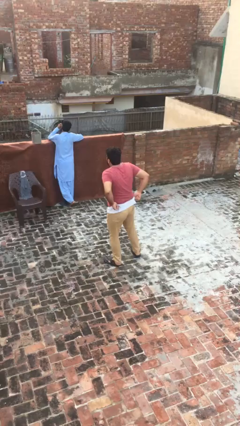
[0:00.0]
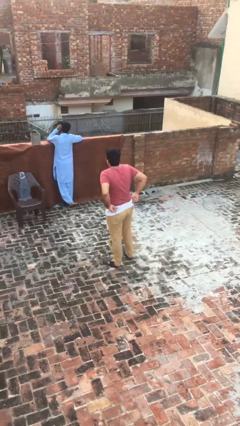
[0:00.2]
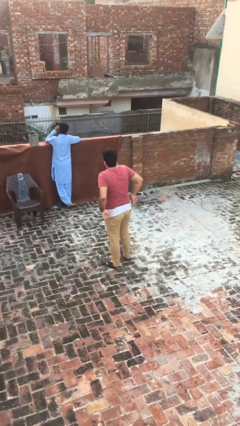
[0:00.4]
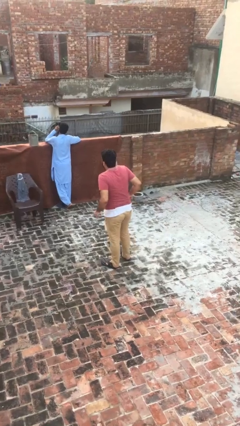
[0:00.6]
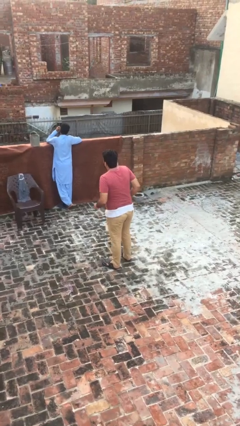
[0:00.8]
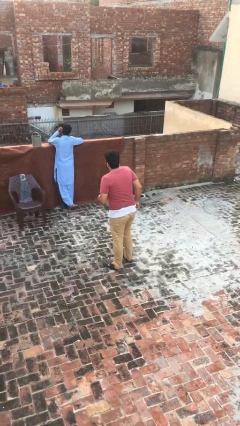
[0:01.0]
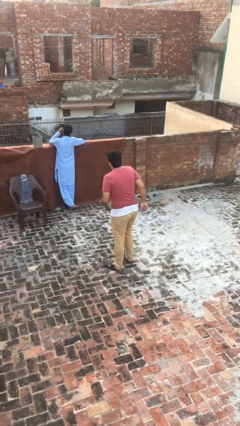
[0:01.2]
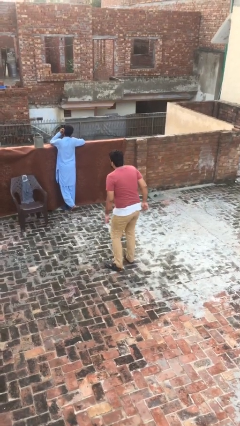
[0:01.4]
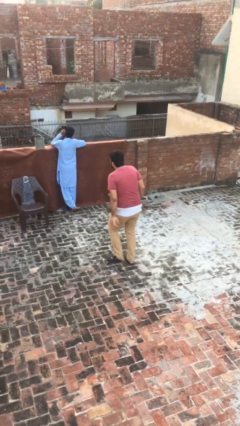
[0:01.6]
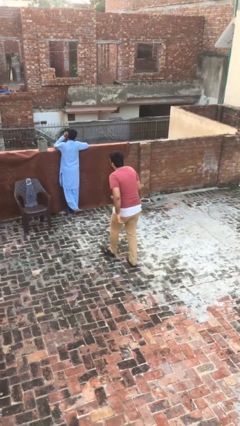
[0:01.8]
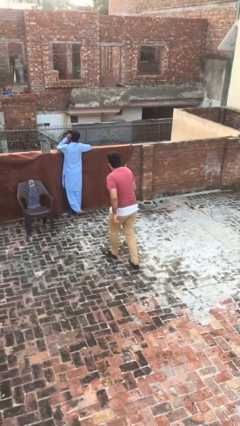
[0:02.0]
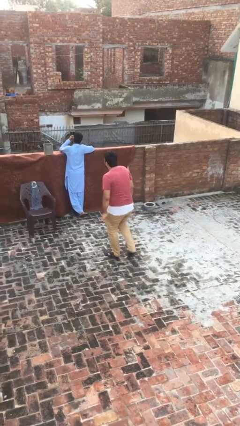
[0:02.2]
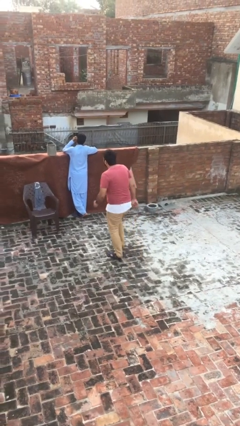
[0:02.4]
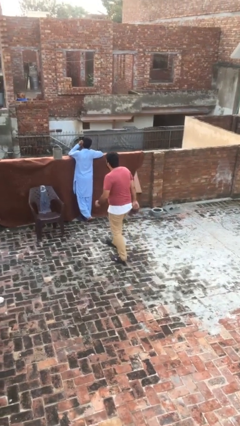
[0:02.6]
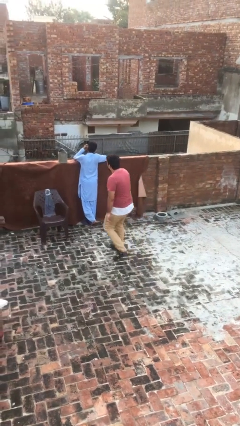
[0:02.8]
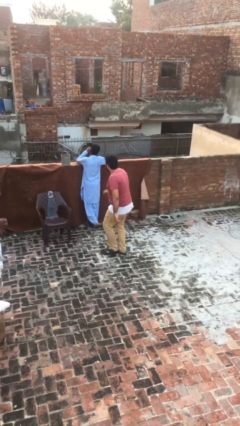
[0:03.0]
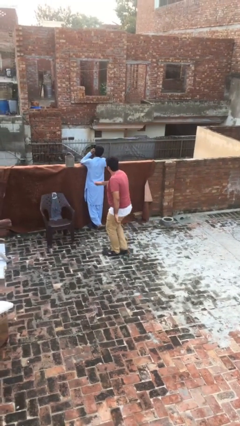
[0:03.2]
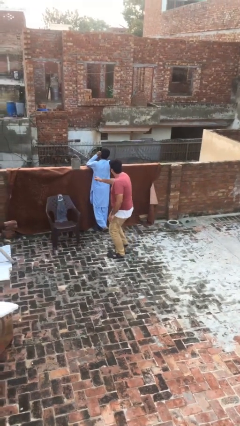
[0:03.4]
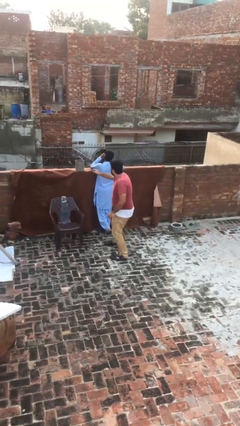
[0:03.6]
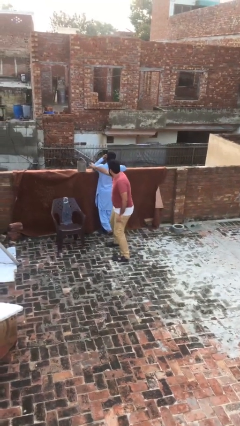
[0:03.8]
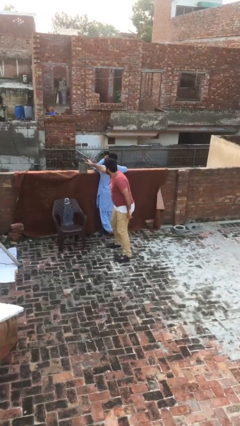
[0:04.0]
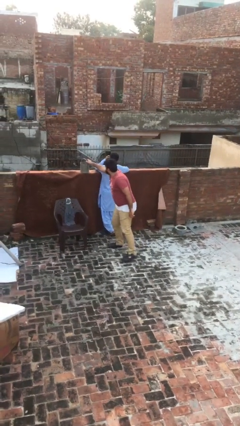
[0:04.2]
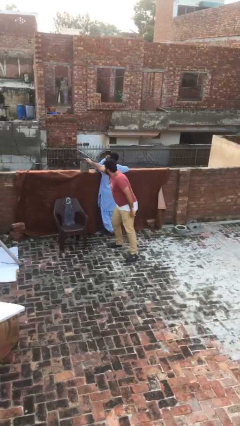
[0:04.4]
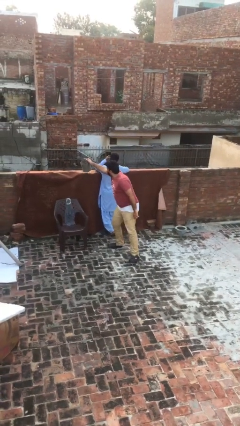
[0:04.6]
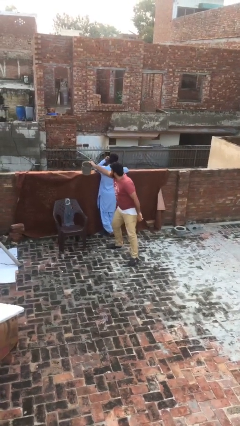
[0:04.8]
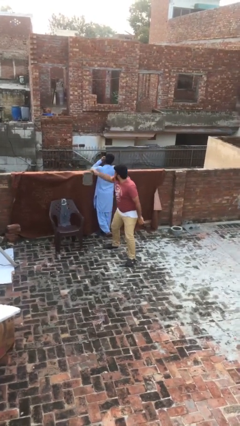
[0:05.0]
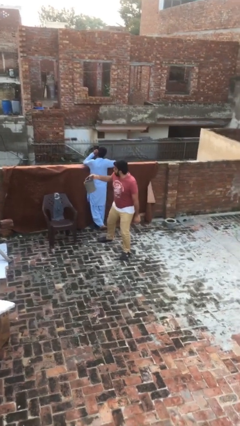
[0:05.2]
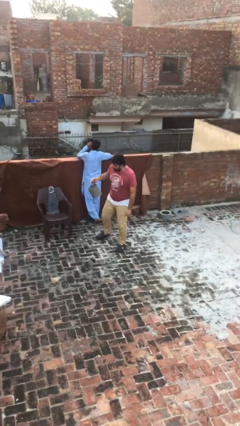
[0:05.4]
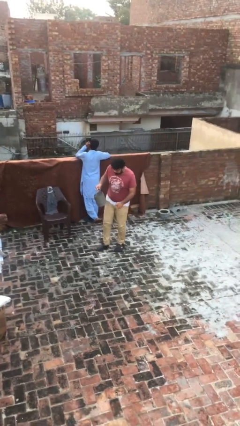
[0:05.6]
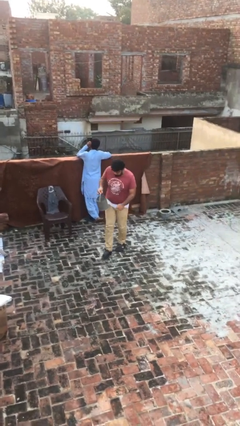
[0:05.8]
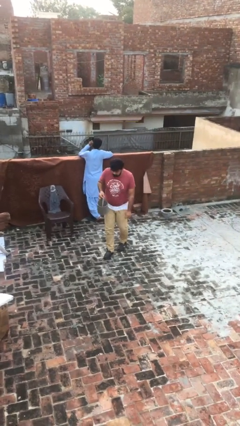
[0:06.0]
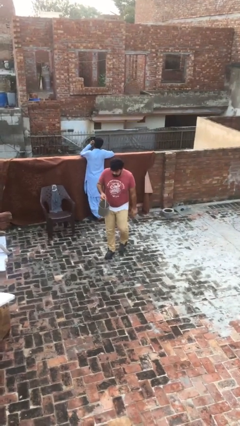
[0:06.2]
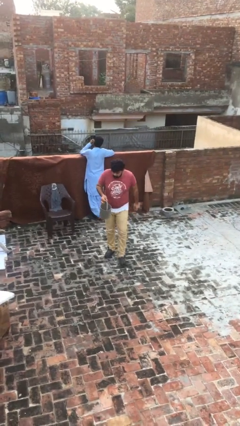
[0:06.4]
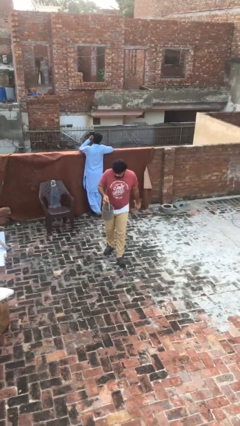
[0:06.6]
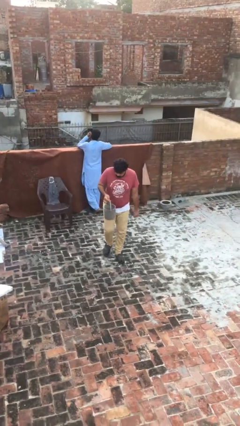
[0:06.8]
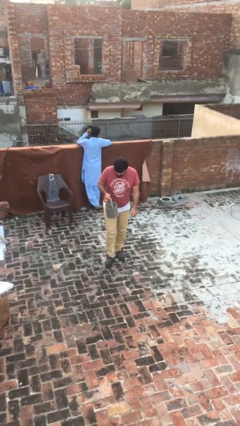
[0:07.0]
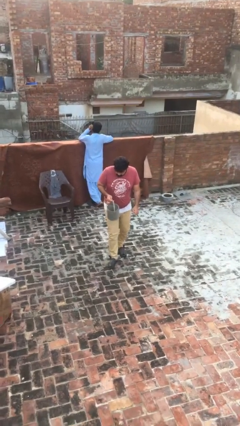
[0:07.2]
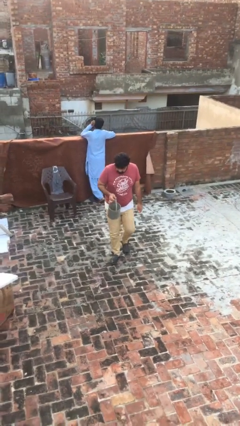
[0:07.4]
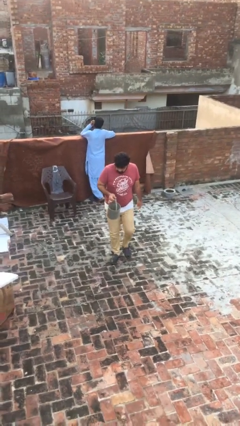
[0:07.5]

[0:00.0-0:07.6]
person steals object from person

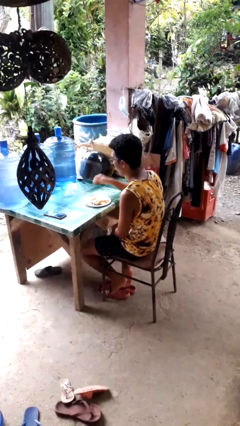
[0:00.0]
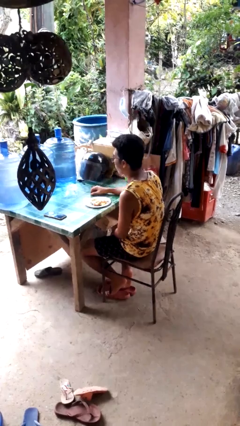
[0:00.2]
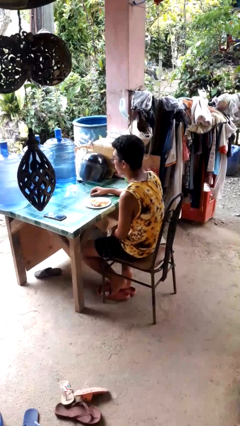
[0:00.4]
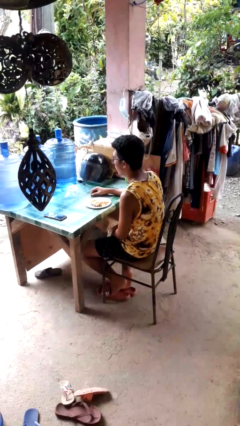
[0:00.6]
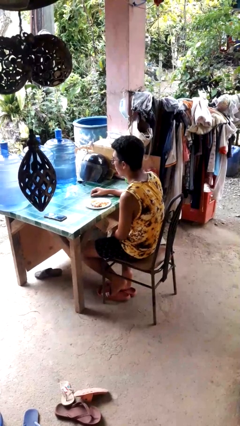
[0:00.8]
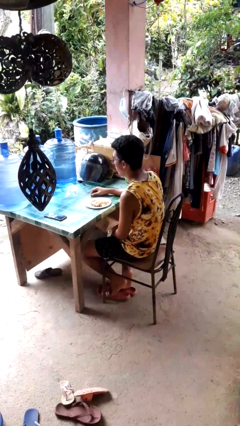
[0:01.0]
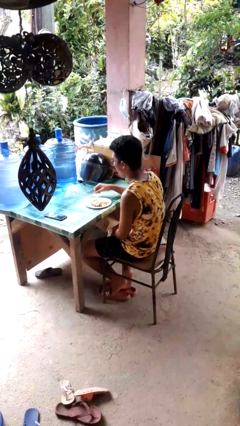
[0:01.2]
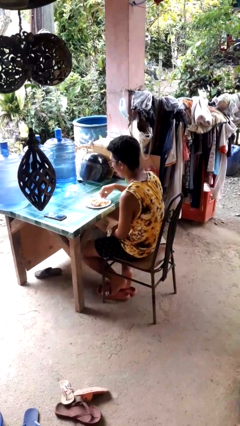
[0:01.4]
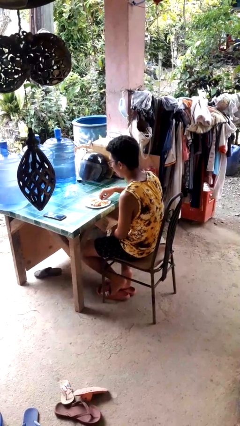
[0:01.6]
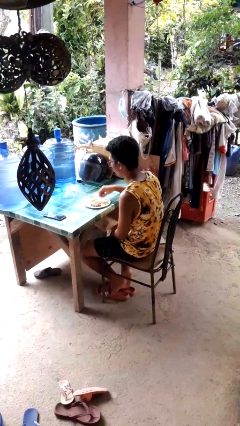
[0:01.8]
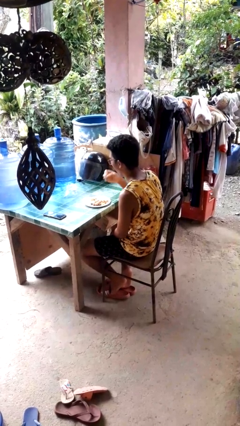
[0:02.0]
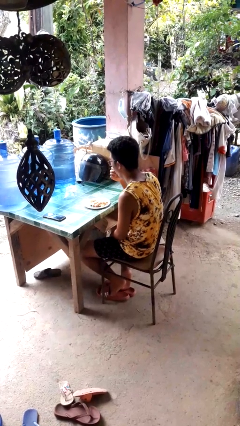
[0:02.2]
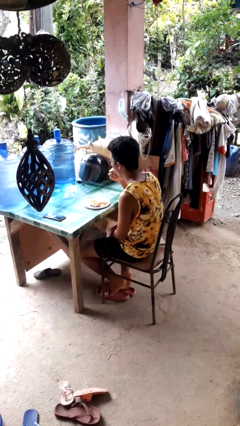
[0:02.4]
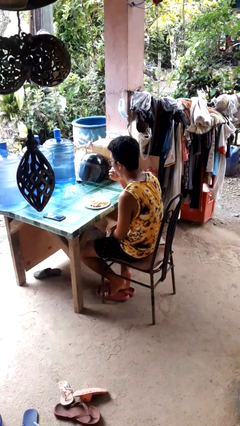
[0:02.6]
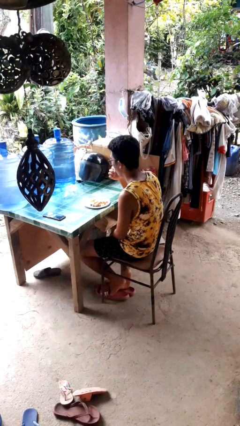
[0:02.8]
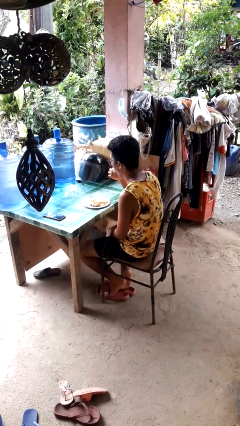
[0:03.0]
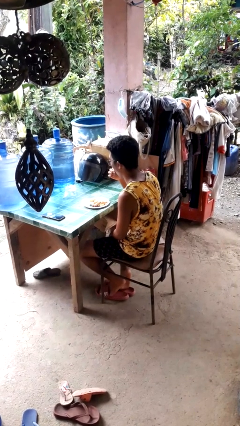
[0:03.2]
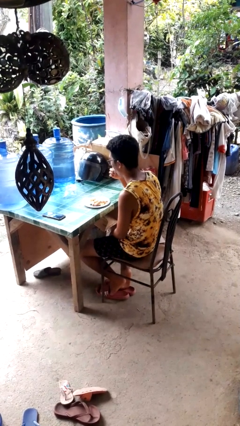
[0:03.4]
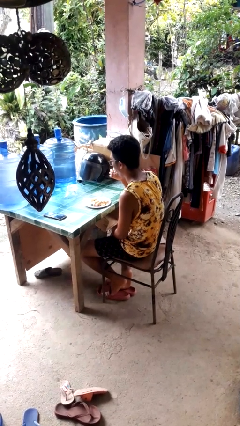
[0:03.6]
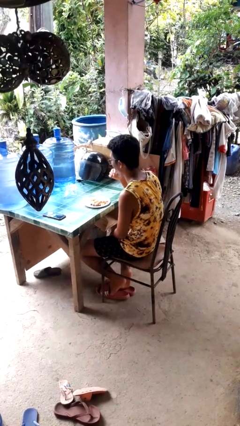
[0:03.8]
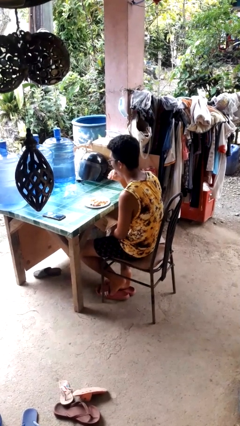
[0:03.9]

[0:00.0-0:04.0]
person eats with hands

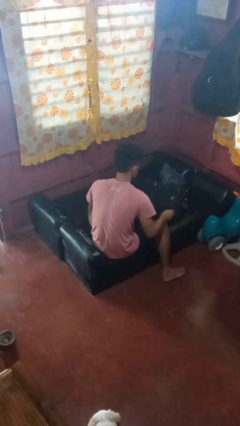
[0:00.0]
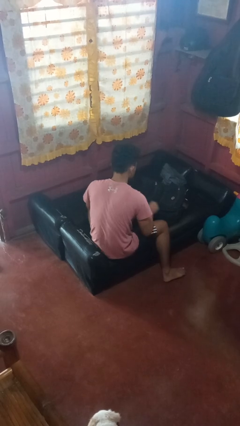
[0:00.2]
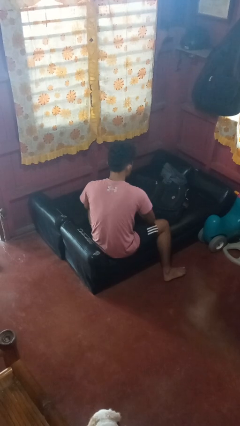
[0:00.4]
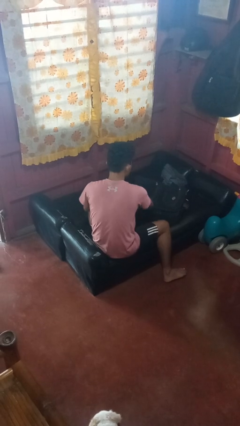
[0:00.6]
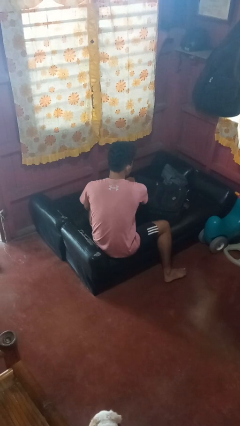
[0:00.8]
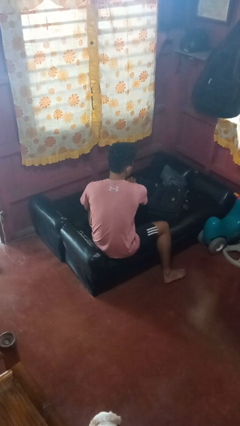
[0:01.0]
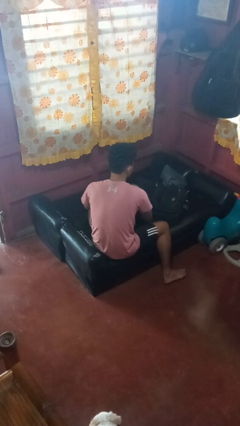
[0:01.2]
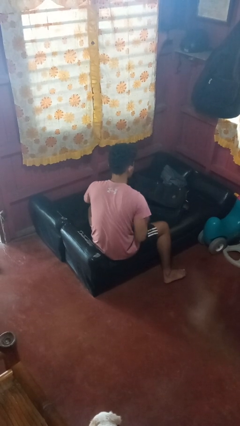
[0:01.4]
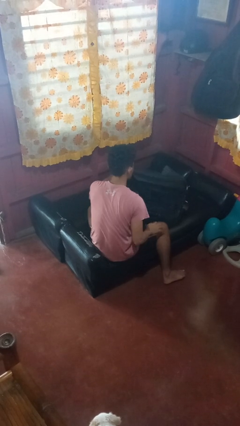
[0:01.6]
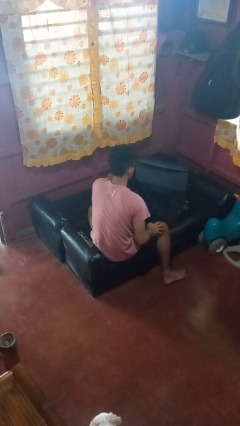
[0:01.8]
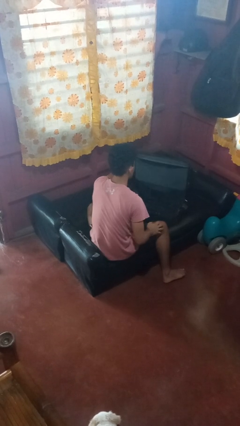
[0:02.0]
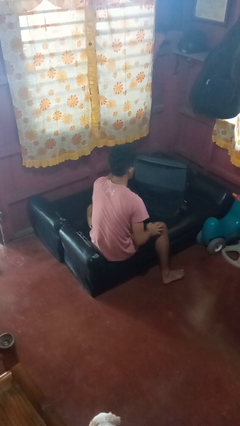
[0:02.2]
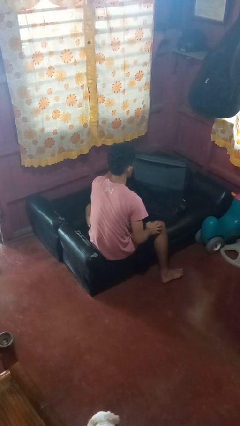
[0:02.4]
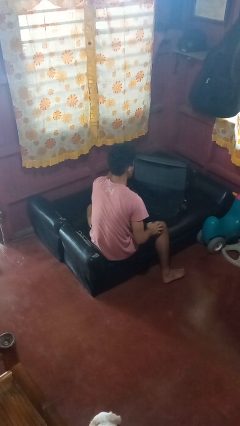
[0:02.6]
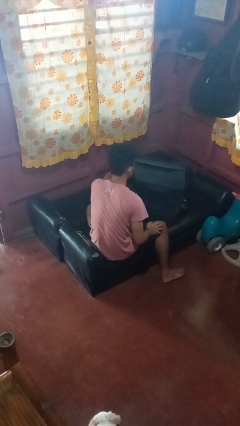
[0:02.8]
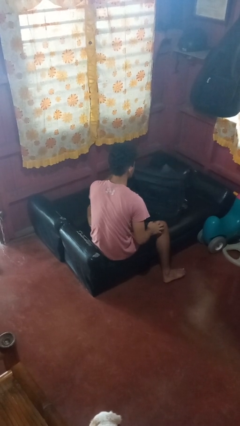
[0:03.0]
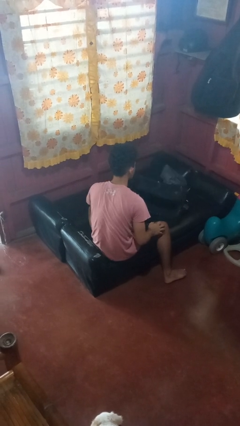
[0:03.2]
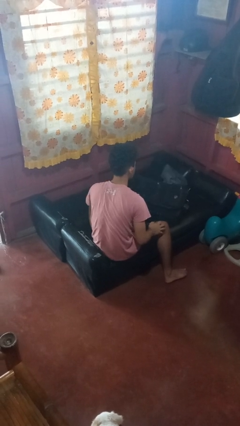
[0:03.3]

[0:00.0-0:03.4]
person opens suitcase

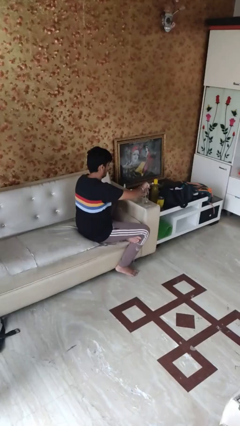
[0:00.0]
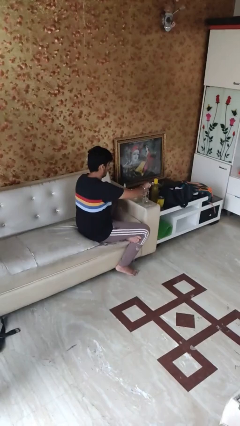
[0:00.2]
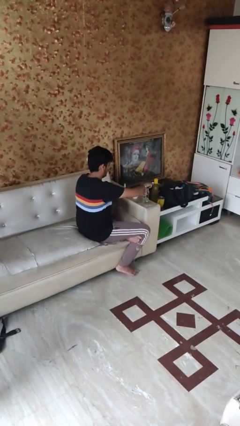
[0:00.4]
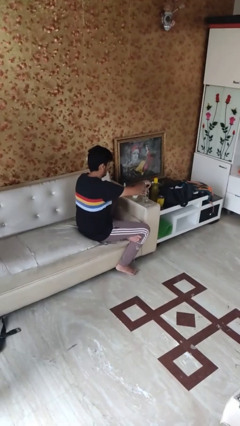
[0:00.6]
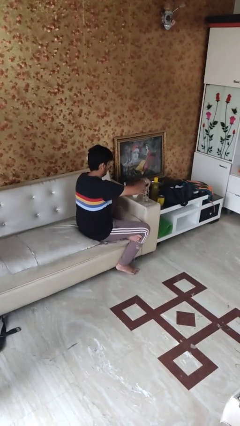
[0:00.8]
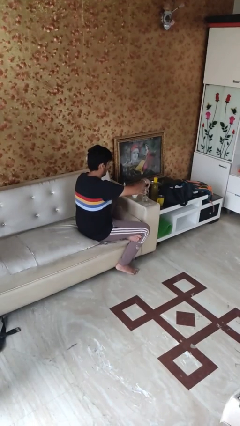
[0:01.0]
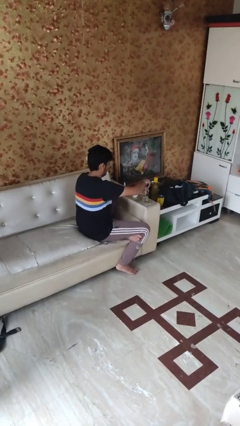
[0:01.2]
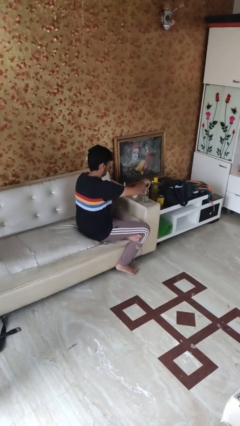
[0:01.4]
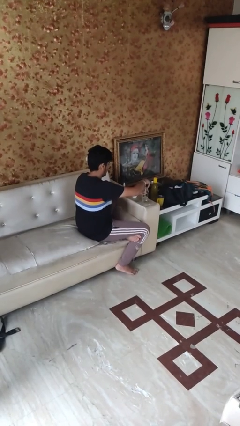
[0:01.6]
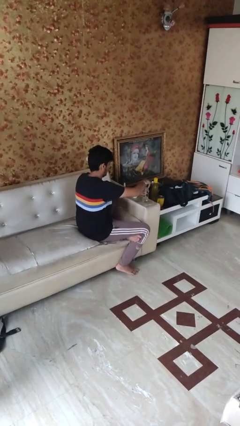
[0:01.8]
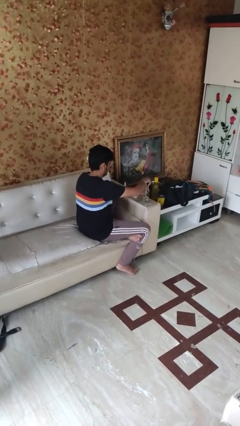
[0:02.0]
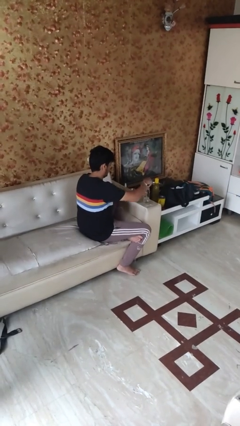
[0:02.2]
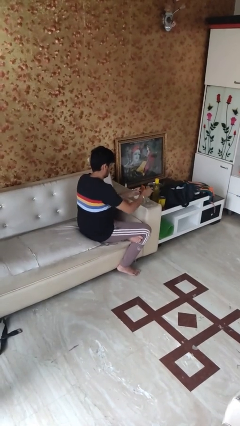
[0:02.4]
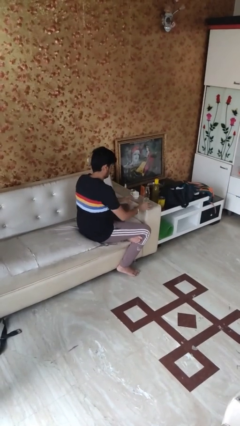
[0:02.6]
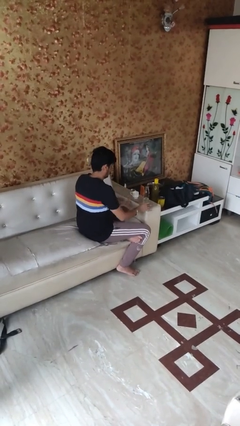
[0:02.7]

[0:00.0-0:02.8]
person unscrews lid from bottle

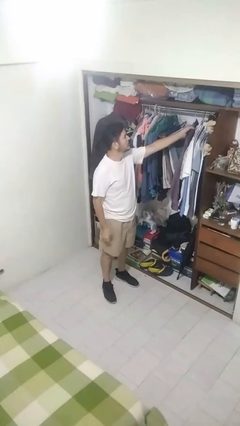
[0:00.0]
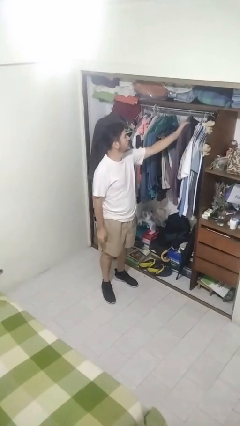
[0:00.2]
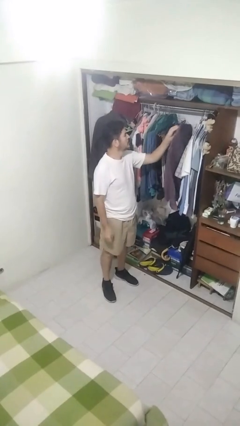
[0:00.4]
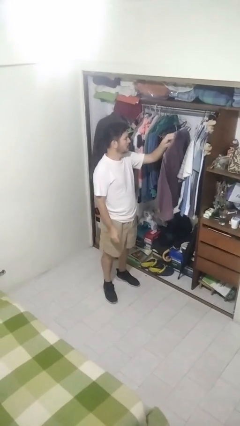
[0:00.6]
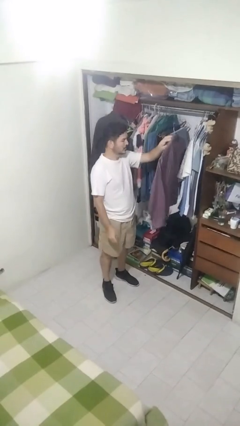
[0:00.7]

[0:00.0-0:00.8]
person takes clothes from closet
